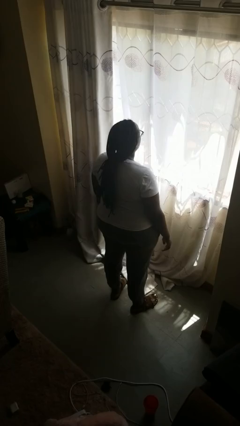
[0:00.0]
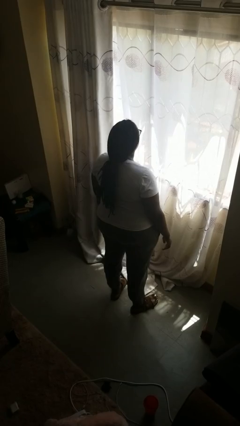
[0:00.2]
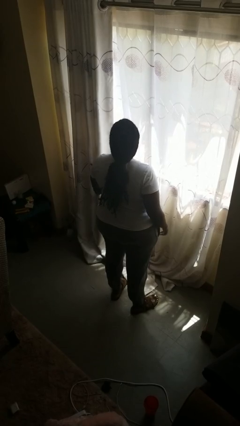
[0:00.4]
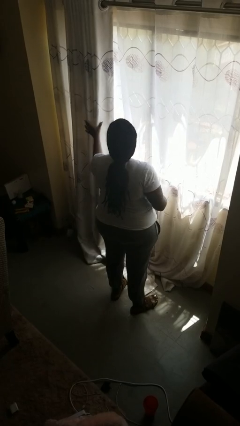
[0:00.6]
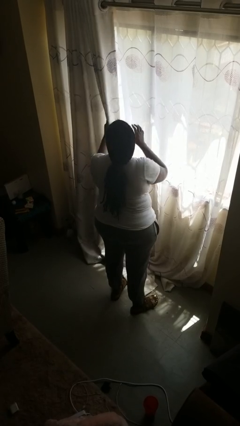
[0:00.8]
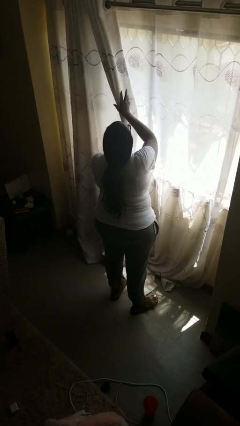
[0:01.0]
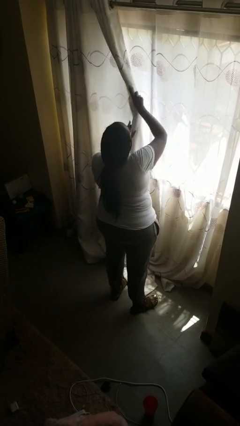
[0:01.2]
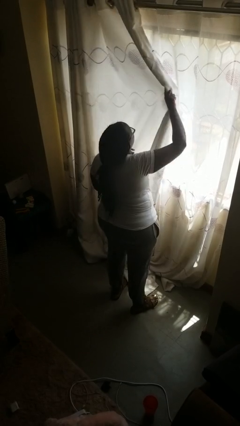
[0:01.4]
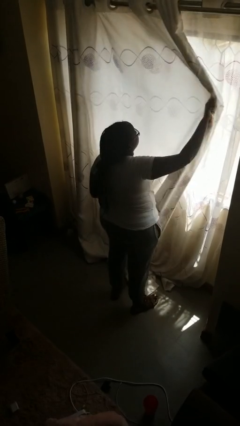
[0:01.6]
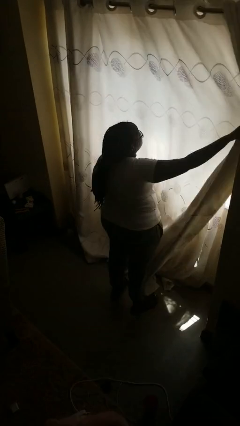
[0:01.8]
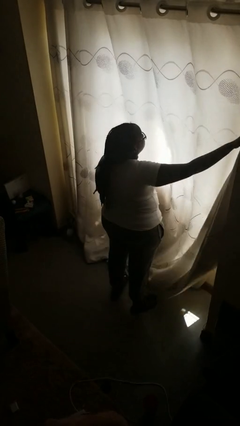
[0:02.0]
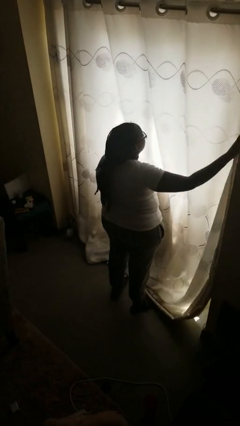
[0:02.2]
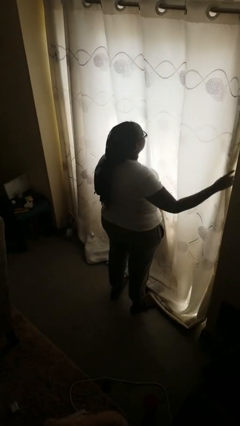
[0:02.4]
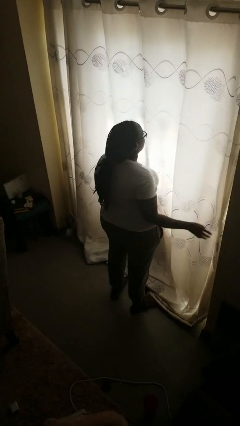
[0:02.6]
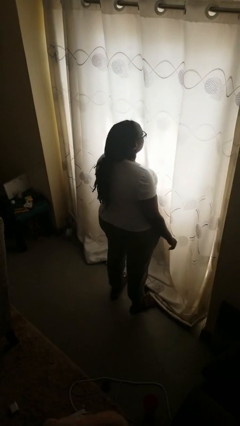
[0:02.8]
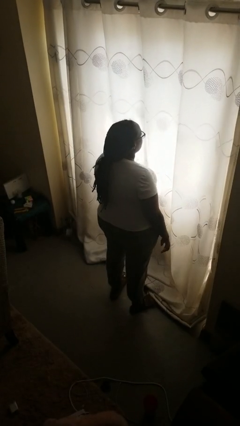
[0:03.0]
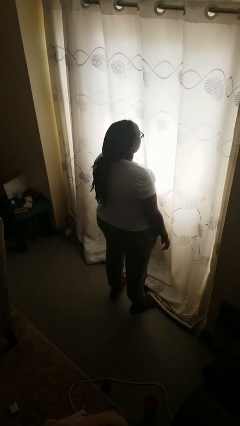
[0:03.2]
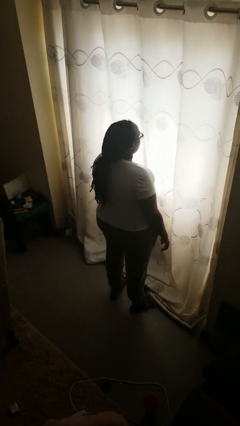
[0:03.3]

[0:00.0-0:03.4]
person closes curtains

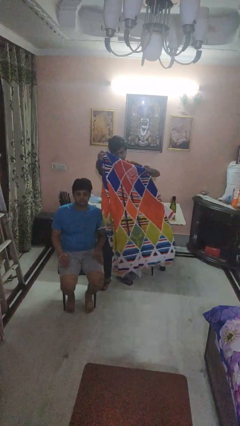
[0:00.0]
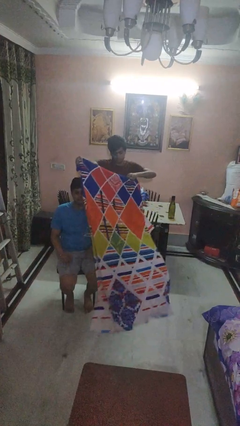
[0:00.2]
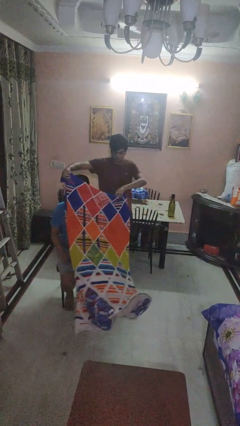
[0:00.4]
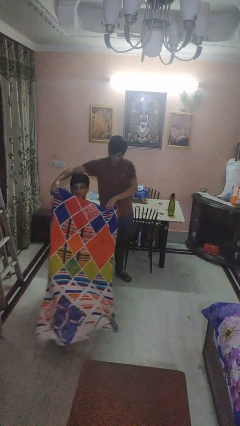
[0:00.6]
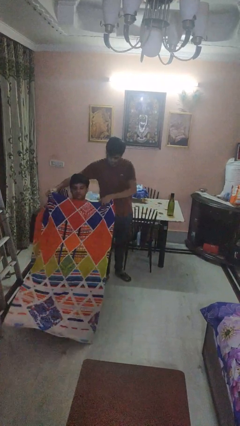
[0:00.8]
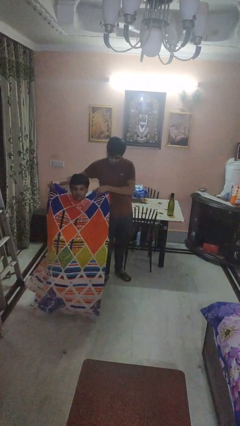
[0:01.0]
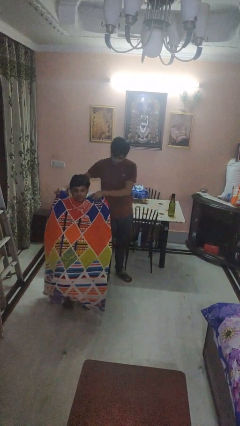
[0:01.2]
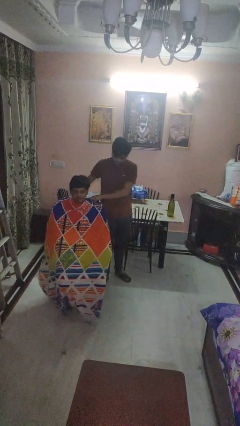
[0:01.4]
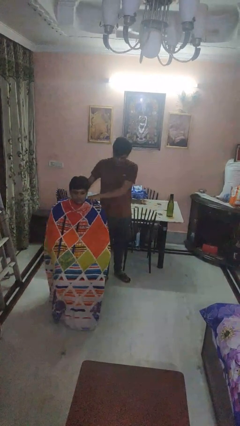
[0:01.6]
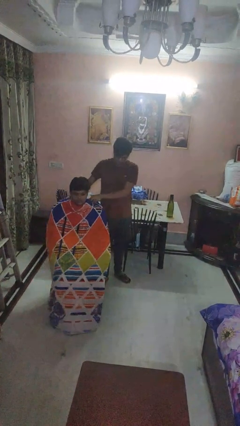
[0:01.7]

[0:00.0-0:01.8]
person covers friend with blanket

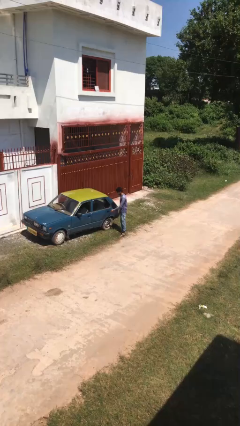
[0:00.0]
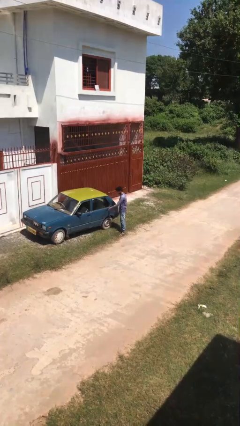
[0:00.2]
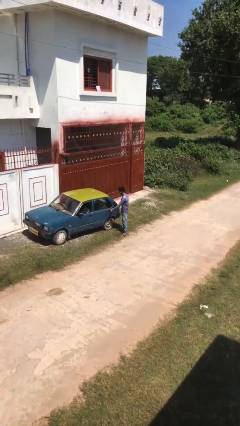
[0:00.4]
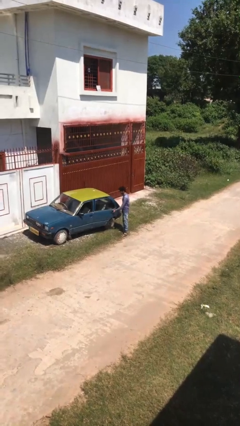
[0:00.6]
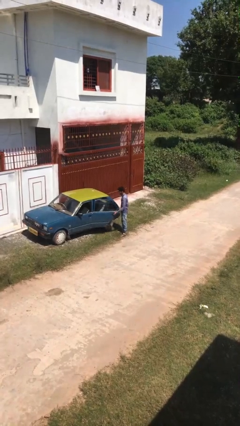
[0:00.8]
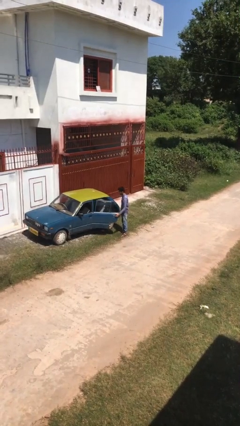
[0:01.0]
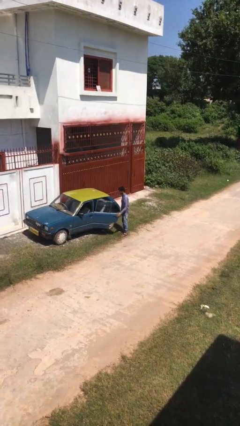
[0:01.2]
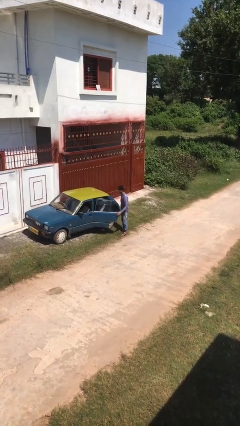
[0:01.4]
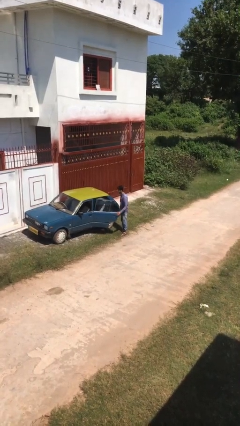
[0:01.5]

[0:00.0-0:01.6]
person opens car door

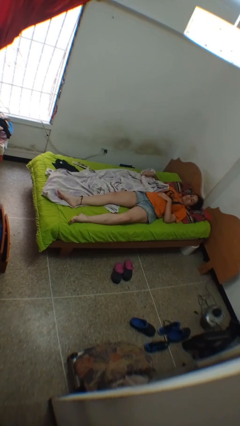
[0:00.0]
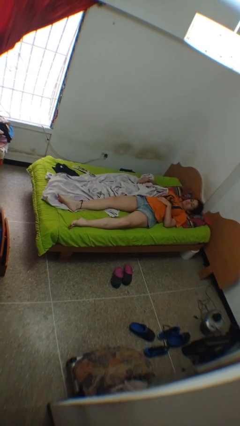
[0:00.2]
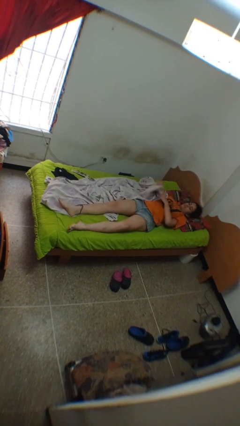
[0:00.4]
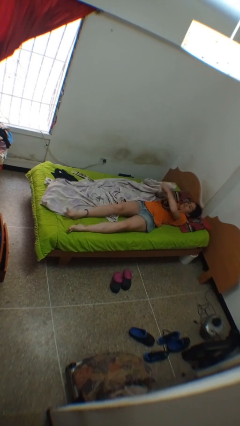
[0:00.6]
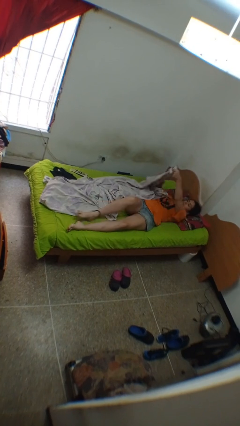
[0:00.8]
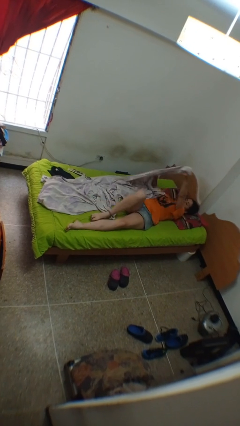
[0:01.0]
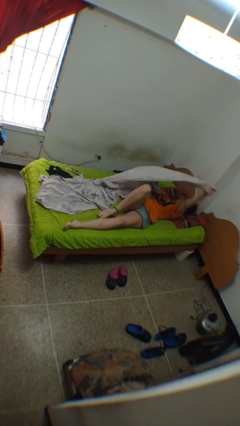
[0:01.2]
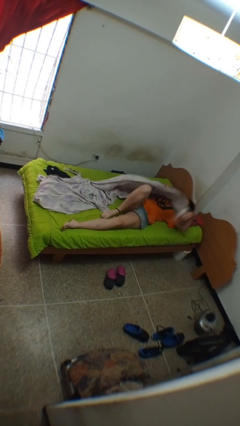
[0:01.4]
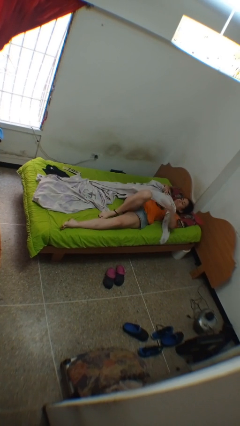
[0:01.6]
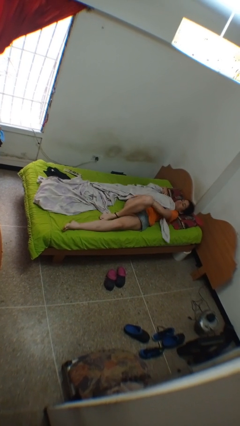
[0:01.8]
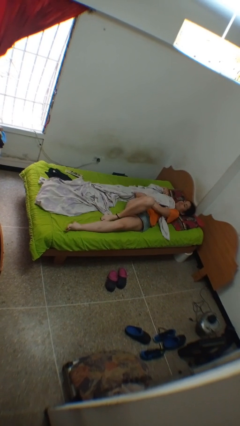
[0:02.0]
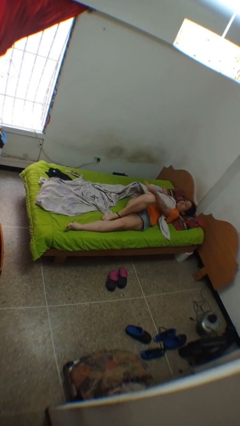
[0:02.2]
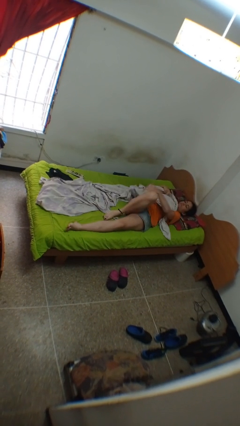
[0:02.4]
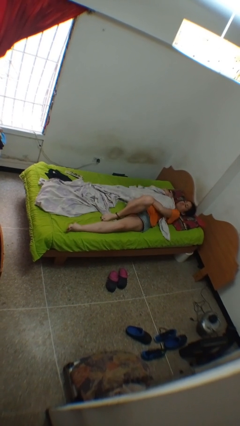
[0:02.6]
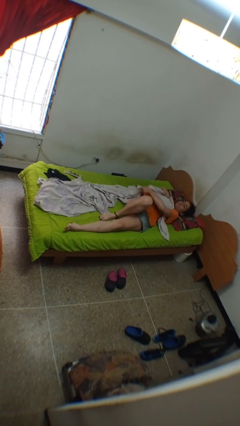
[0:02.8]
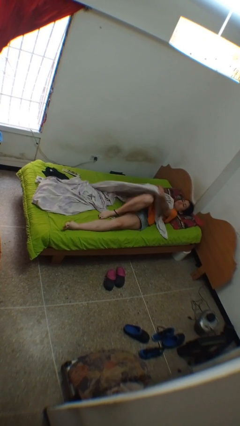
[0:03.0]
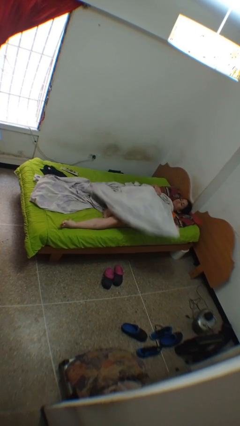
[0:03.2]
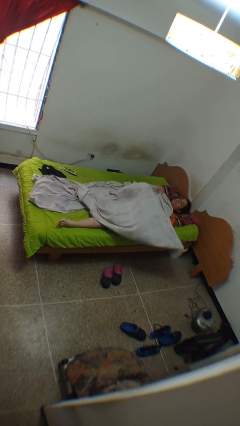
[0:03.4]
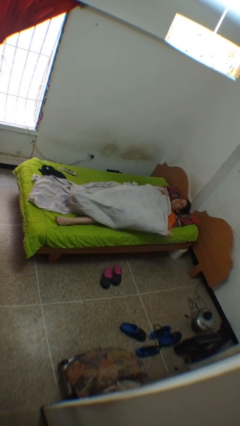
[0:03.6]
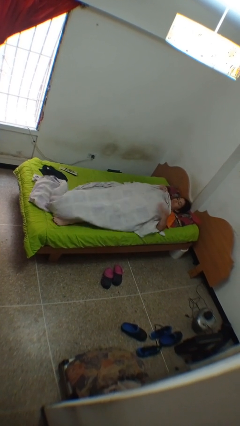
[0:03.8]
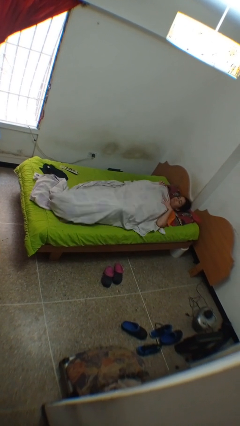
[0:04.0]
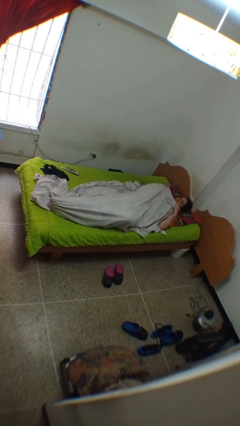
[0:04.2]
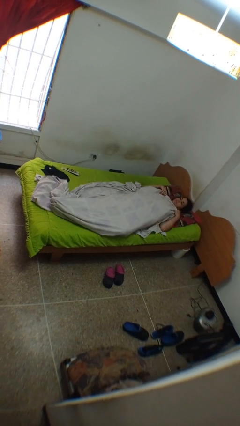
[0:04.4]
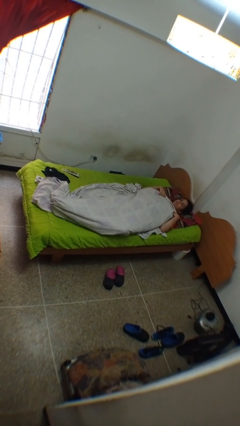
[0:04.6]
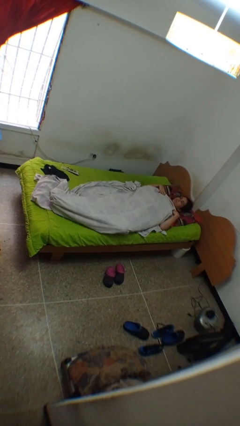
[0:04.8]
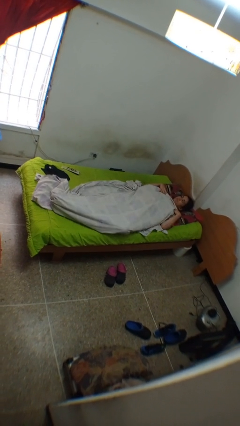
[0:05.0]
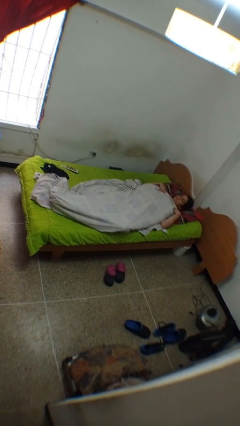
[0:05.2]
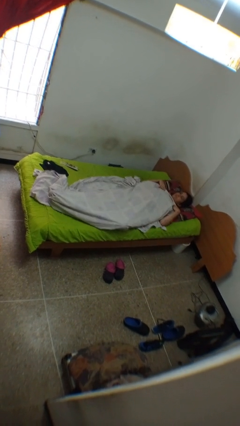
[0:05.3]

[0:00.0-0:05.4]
person covers with bedsheets

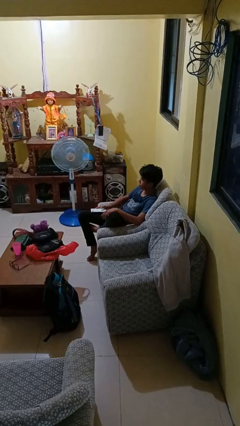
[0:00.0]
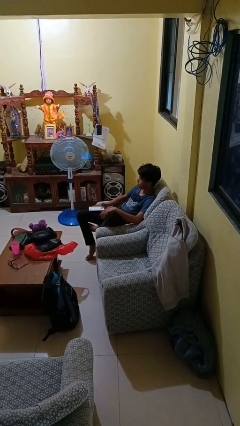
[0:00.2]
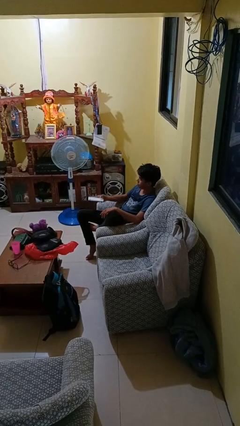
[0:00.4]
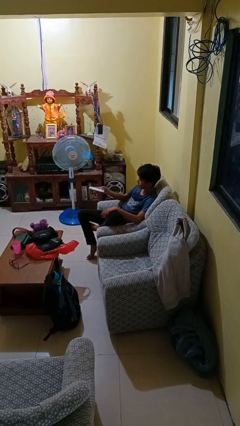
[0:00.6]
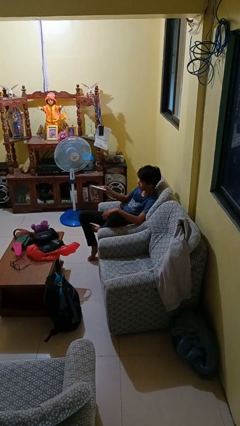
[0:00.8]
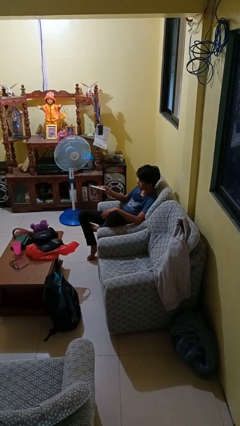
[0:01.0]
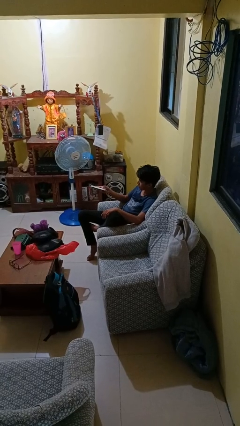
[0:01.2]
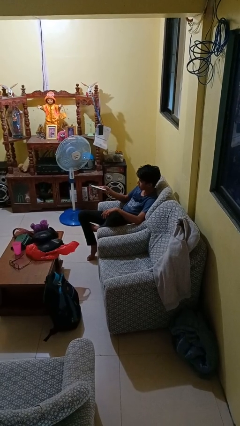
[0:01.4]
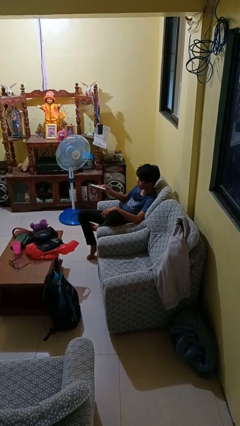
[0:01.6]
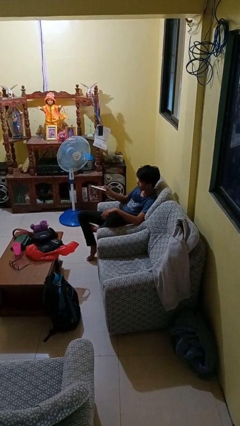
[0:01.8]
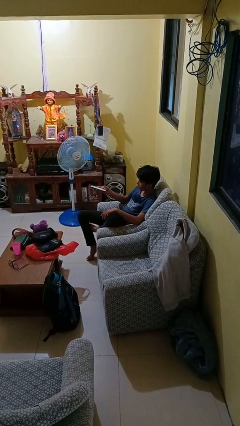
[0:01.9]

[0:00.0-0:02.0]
person uses television remote

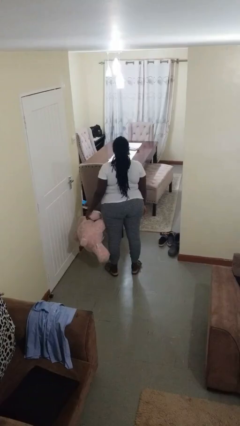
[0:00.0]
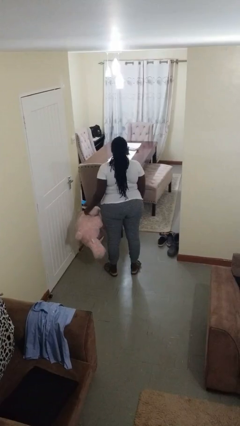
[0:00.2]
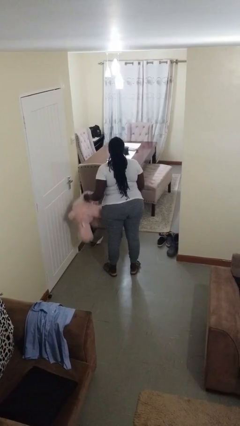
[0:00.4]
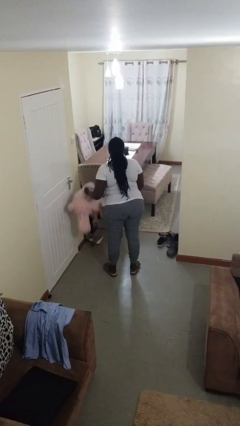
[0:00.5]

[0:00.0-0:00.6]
person hugs stuffed animal

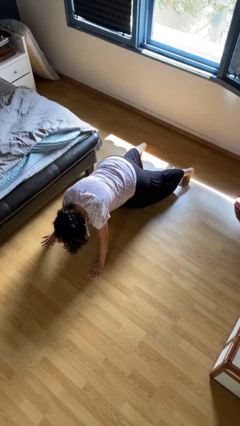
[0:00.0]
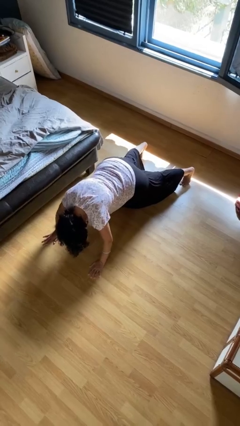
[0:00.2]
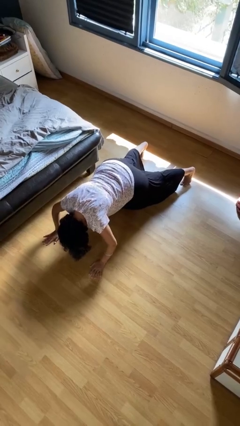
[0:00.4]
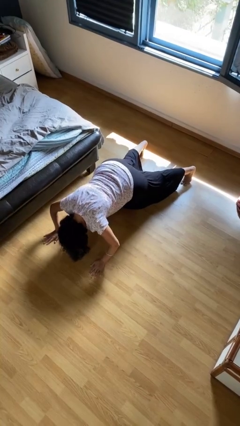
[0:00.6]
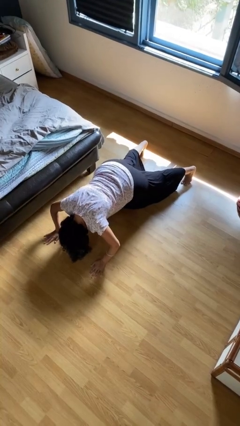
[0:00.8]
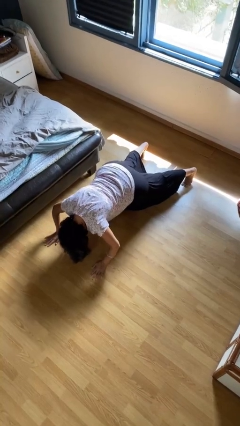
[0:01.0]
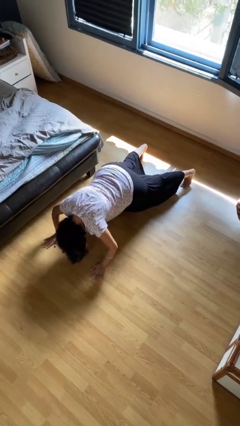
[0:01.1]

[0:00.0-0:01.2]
person exercises with pushup

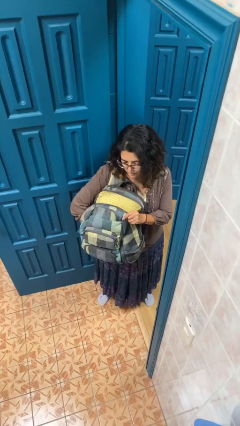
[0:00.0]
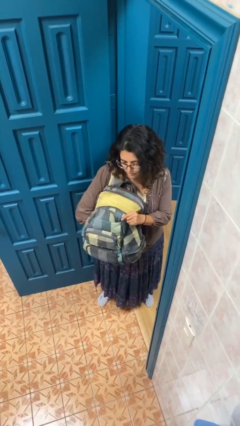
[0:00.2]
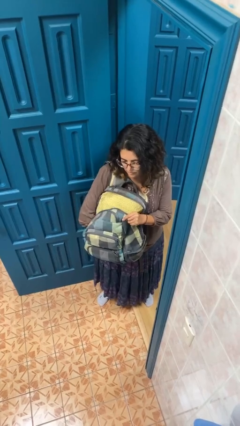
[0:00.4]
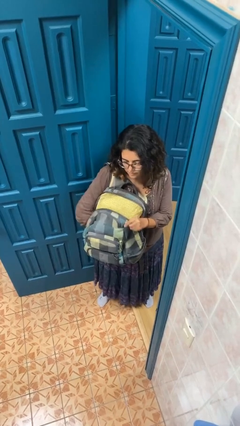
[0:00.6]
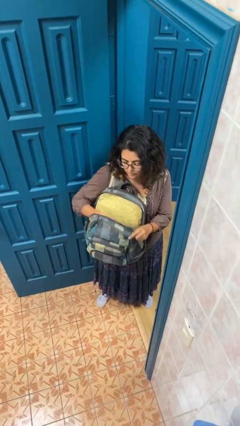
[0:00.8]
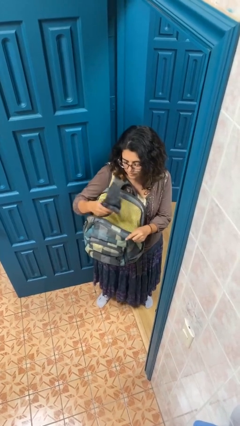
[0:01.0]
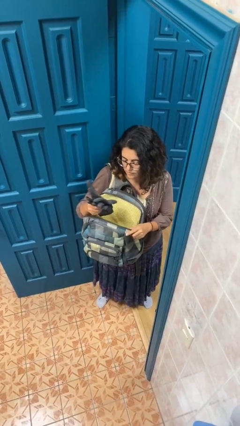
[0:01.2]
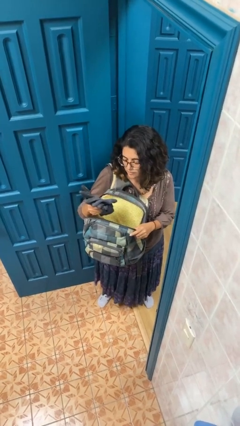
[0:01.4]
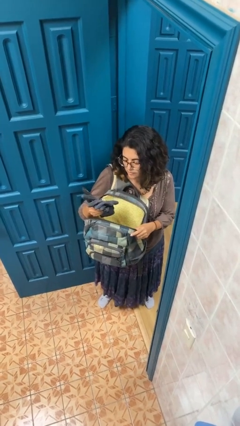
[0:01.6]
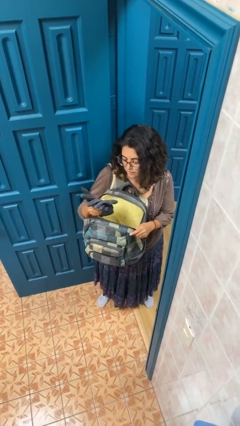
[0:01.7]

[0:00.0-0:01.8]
person takes object from backpack
